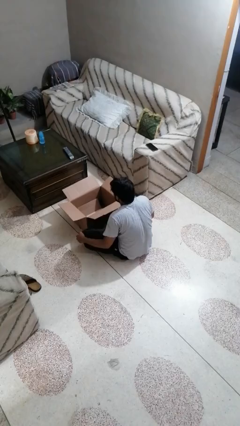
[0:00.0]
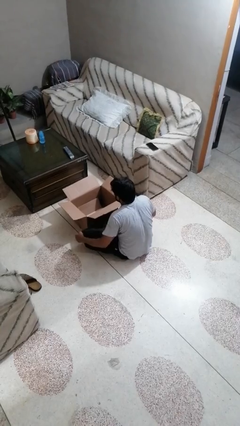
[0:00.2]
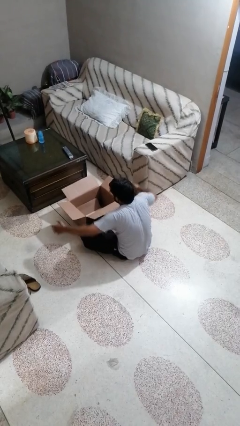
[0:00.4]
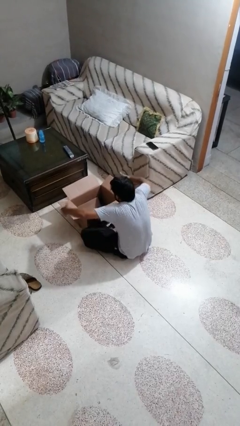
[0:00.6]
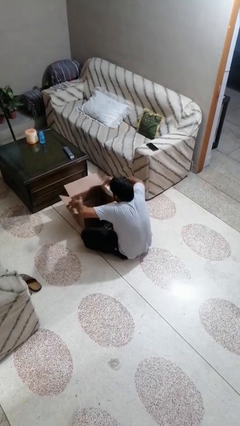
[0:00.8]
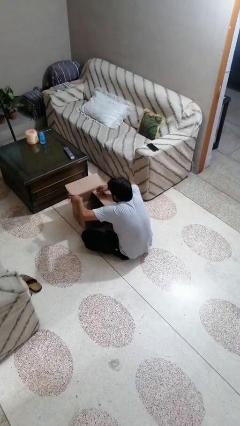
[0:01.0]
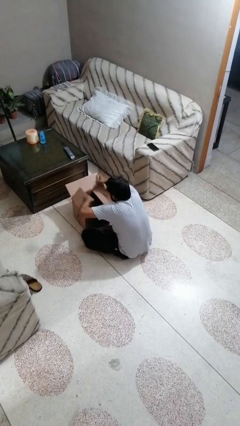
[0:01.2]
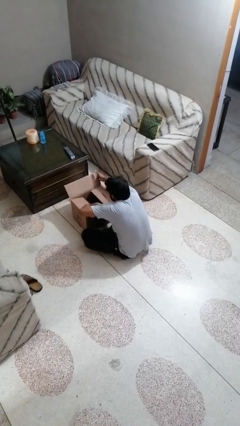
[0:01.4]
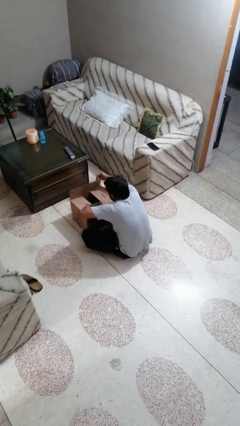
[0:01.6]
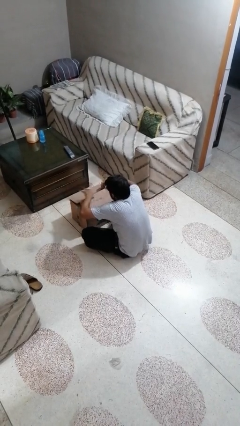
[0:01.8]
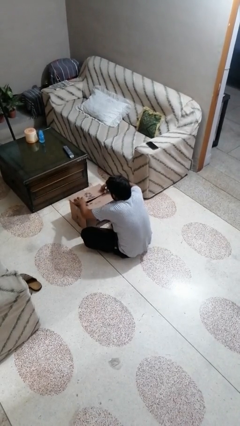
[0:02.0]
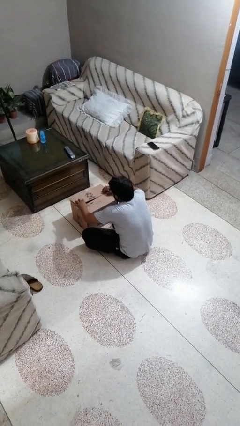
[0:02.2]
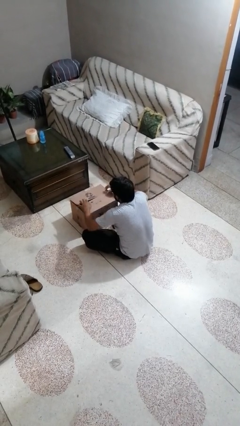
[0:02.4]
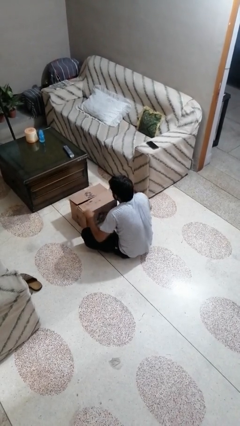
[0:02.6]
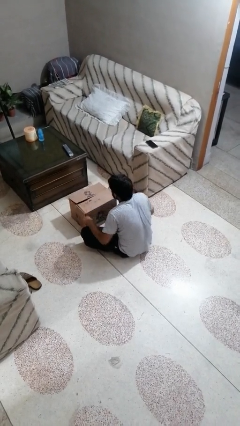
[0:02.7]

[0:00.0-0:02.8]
person closes box

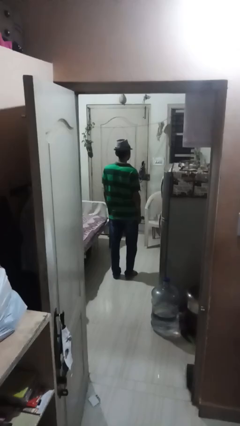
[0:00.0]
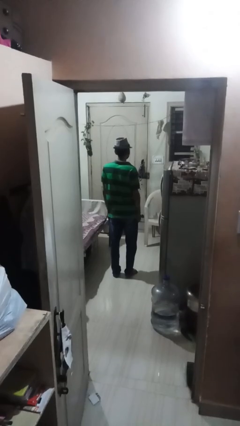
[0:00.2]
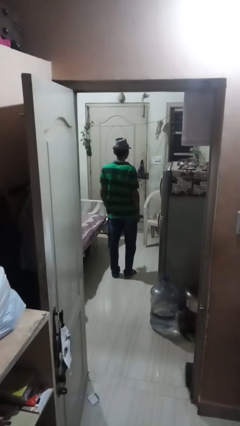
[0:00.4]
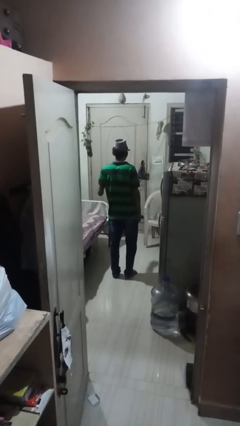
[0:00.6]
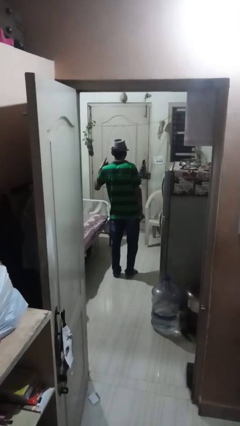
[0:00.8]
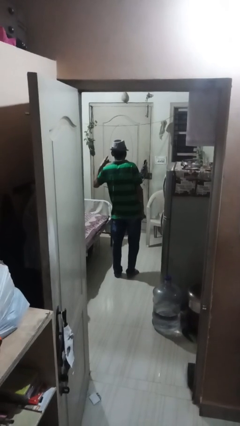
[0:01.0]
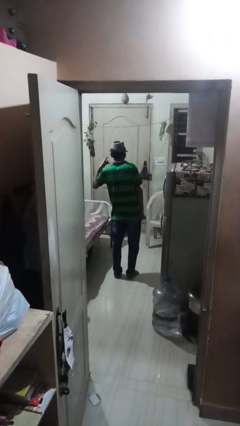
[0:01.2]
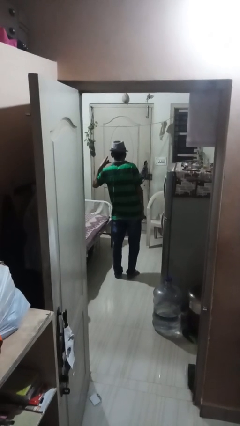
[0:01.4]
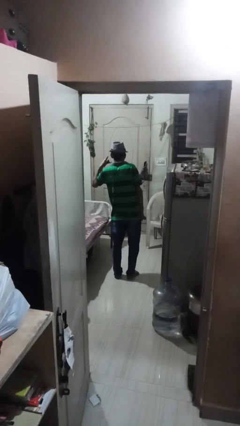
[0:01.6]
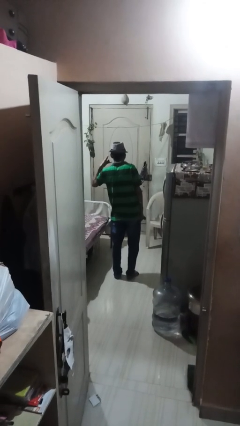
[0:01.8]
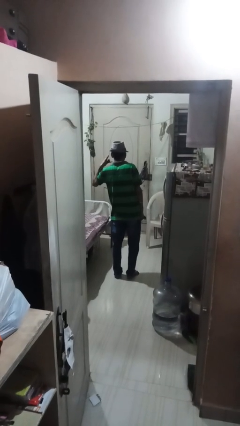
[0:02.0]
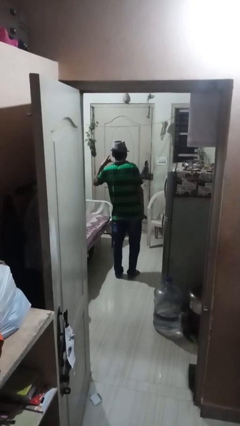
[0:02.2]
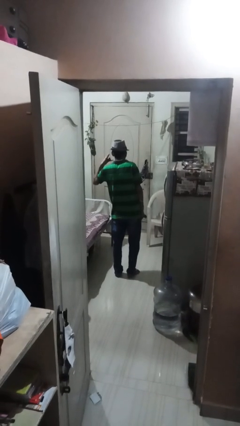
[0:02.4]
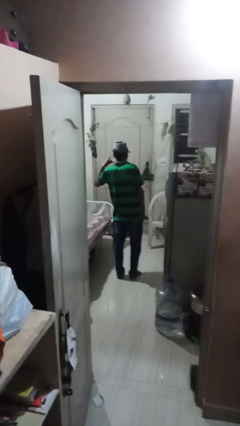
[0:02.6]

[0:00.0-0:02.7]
person gestures call me

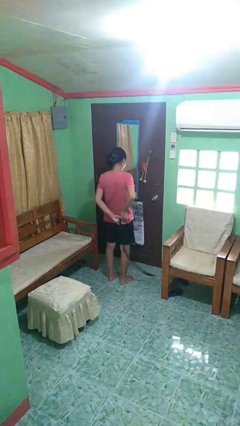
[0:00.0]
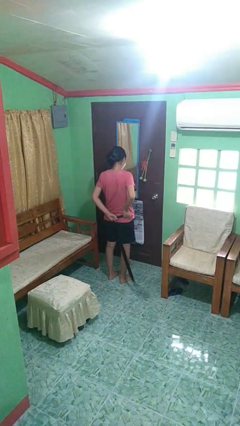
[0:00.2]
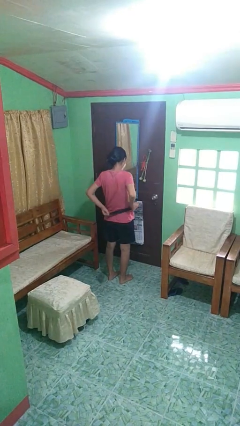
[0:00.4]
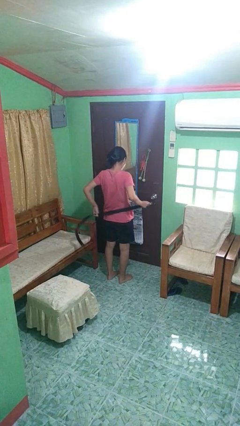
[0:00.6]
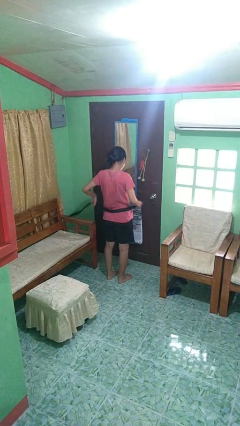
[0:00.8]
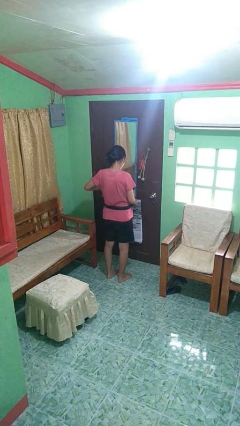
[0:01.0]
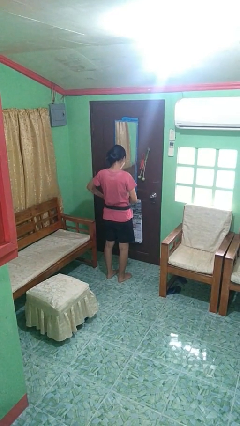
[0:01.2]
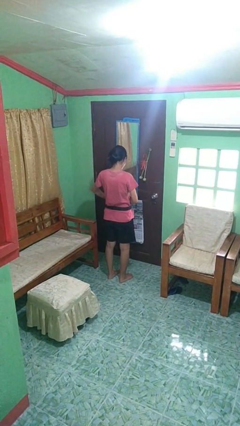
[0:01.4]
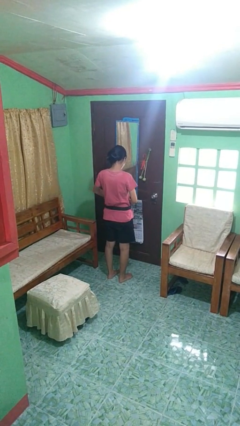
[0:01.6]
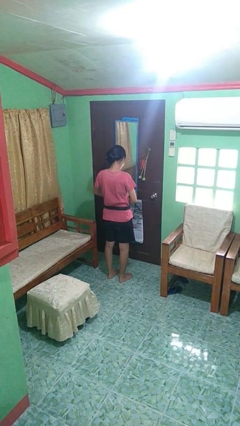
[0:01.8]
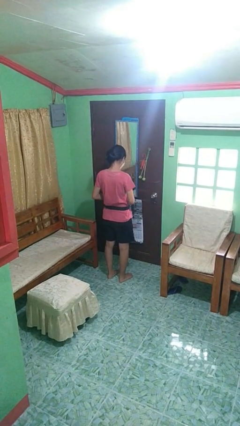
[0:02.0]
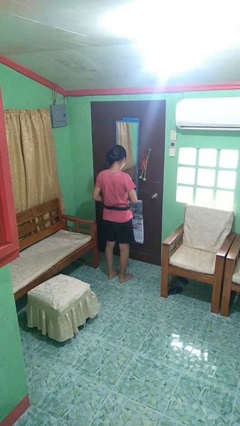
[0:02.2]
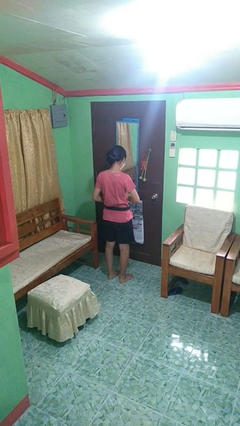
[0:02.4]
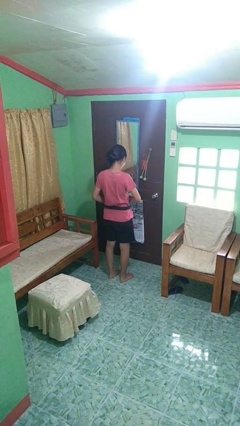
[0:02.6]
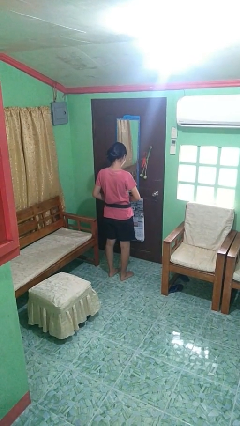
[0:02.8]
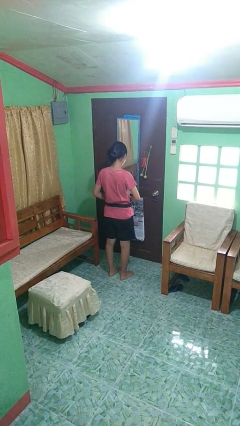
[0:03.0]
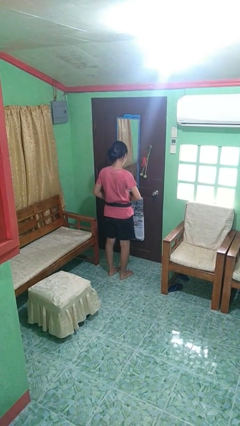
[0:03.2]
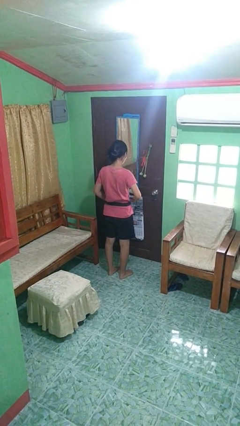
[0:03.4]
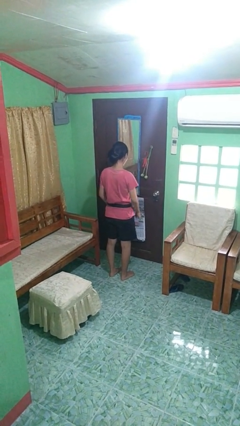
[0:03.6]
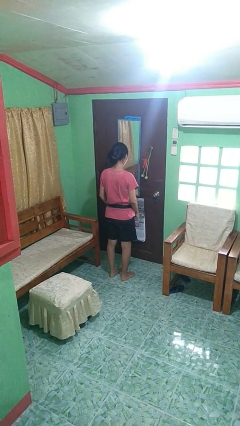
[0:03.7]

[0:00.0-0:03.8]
person puts on belt

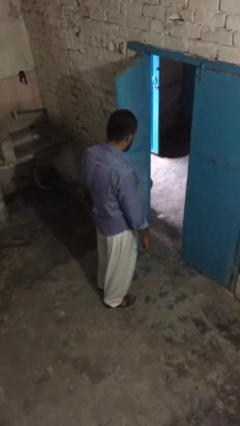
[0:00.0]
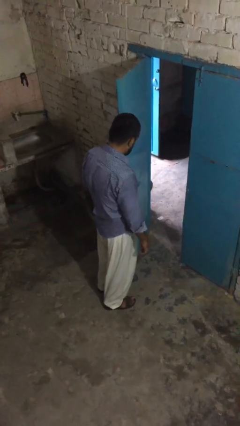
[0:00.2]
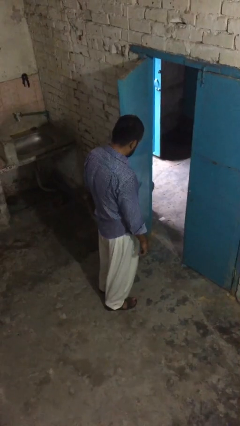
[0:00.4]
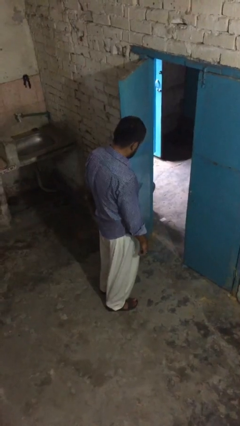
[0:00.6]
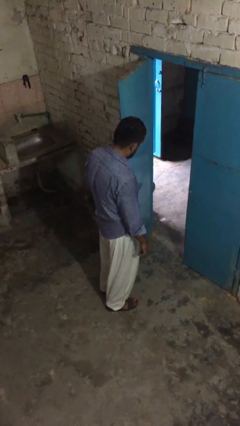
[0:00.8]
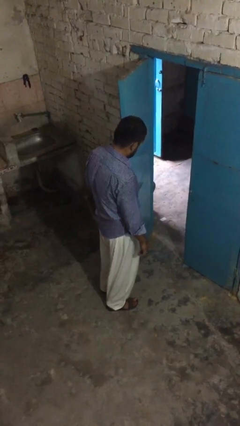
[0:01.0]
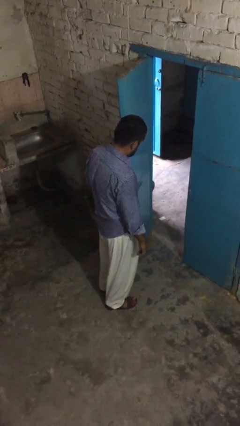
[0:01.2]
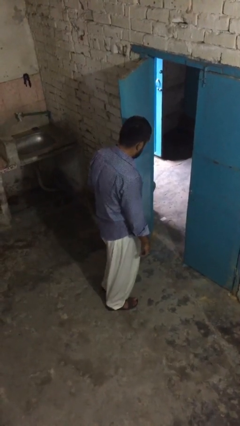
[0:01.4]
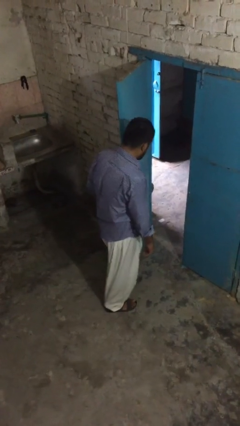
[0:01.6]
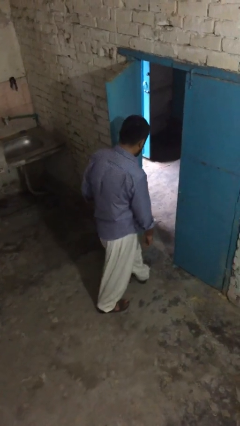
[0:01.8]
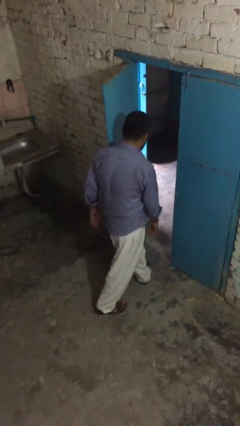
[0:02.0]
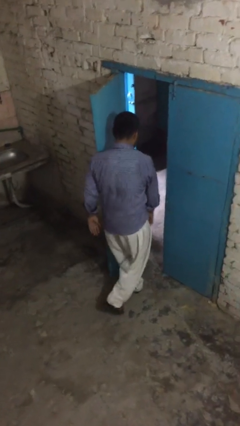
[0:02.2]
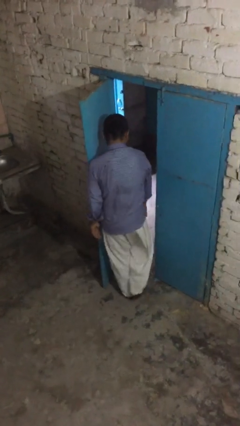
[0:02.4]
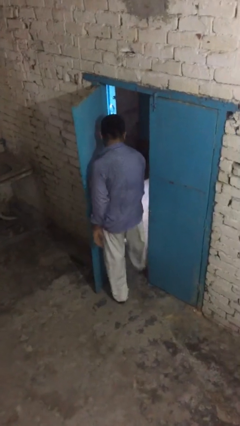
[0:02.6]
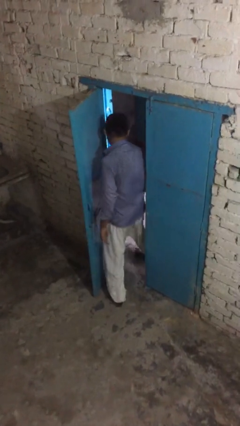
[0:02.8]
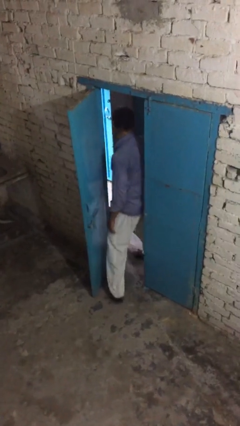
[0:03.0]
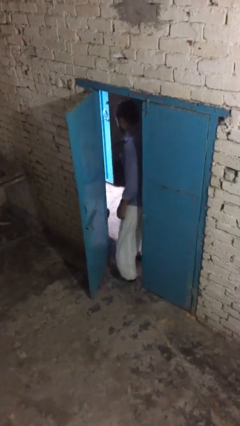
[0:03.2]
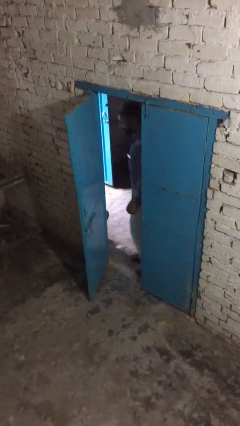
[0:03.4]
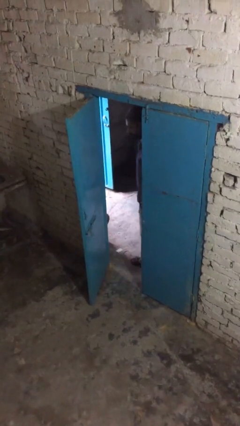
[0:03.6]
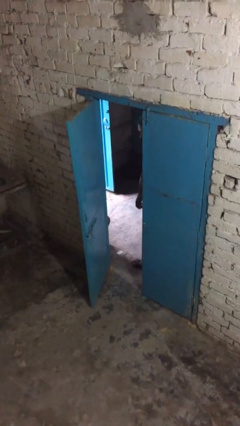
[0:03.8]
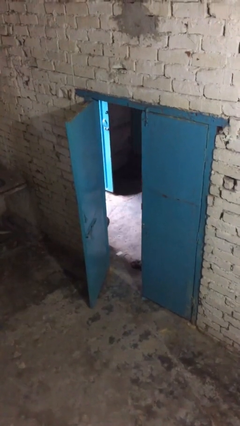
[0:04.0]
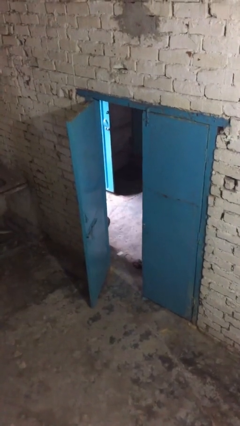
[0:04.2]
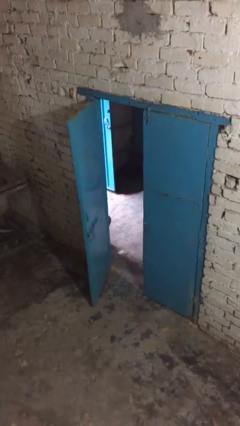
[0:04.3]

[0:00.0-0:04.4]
person exits scene through structure

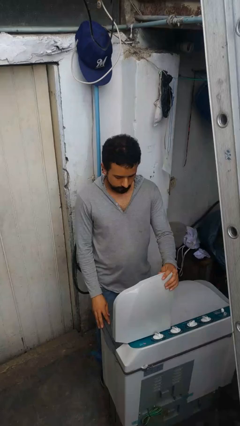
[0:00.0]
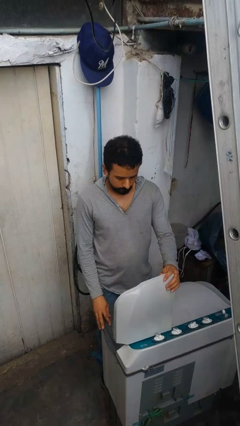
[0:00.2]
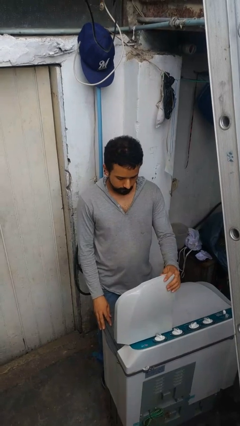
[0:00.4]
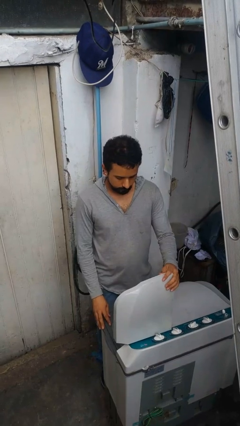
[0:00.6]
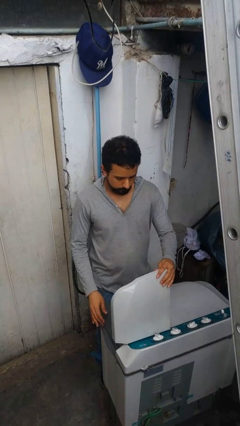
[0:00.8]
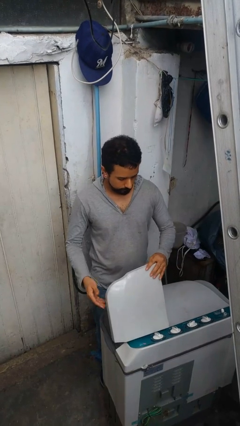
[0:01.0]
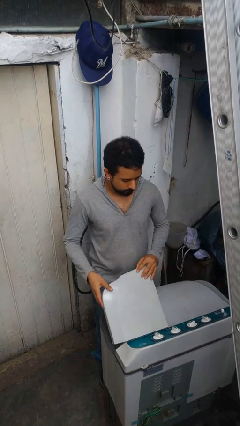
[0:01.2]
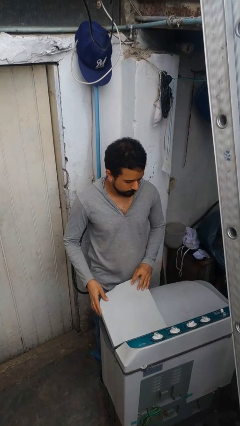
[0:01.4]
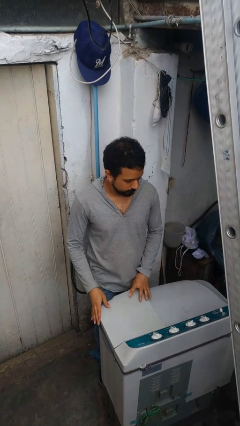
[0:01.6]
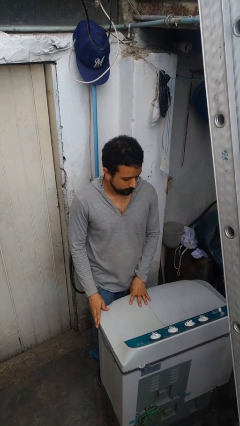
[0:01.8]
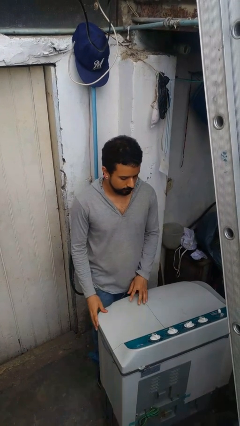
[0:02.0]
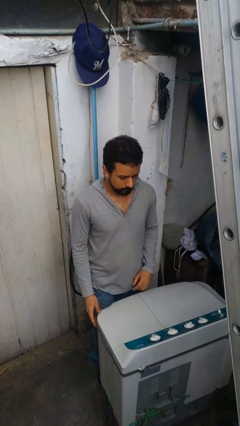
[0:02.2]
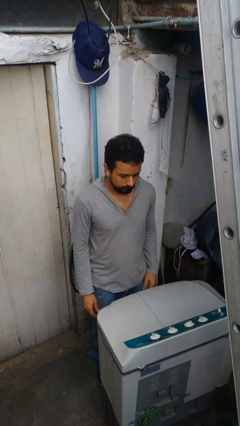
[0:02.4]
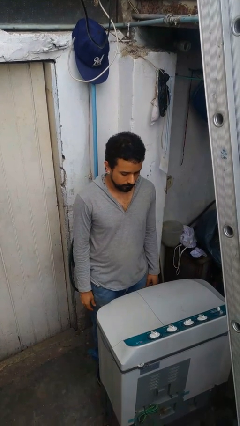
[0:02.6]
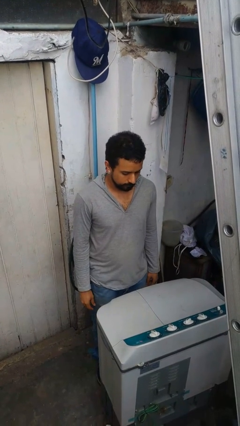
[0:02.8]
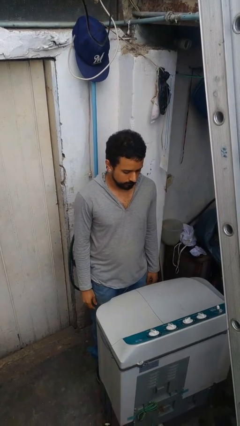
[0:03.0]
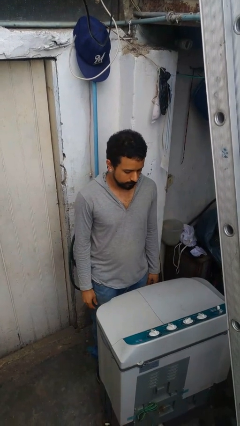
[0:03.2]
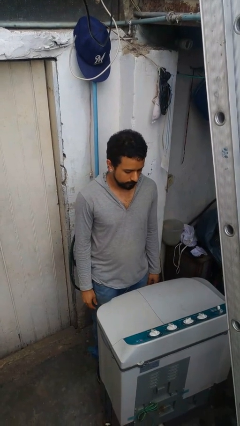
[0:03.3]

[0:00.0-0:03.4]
person closes clothes washer

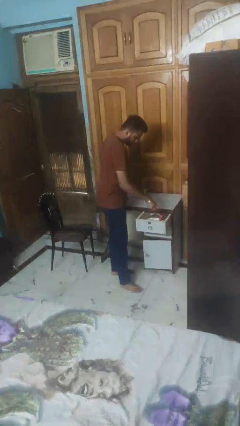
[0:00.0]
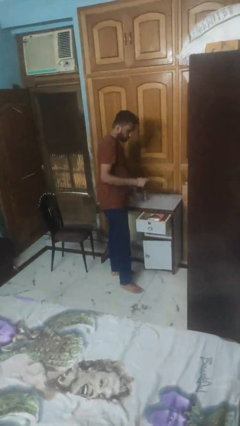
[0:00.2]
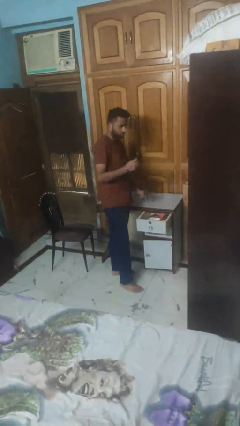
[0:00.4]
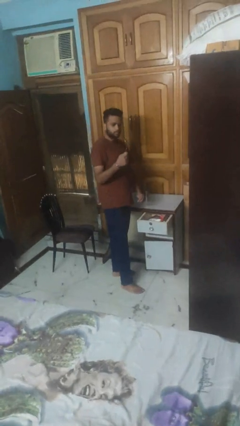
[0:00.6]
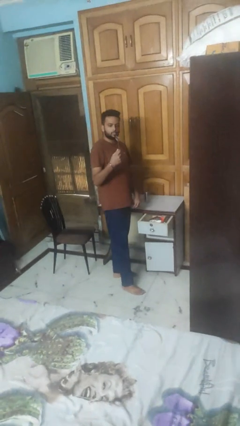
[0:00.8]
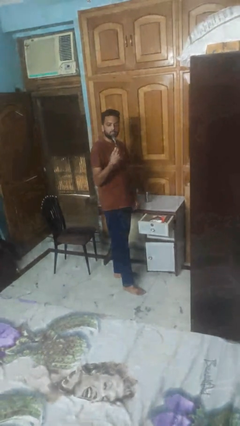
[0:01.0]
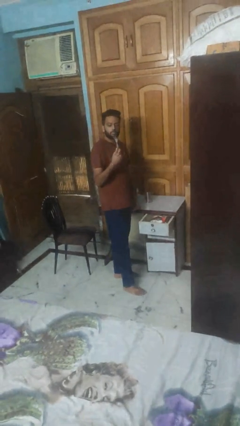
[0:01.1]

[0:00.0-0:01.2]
person takes object from kitchen drawer
